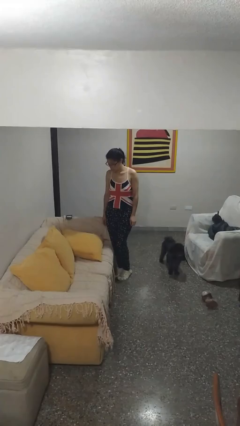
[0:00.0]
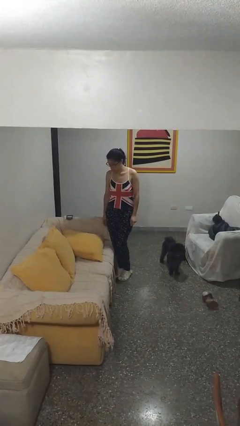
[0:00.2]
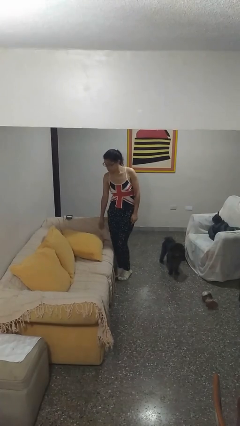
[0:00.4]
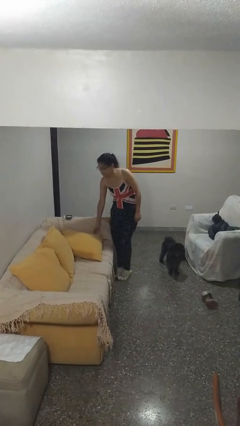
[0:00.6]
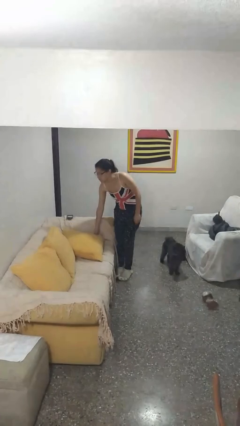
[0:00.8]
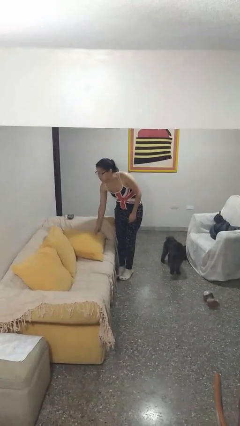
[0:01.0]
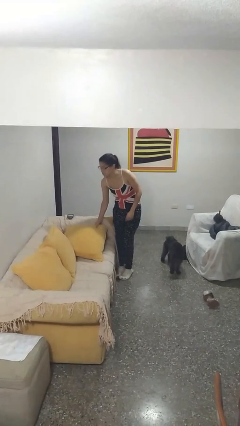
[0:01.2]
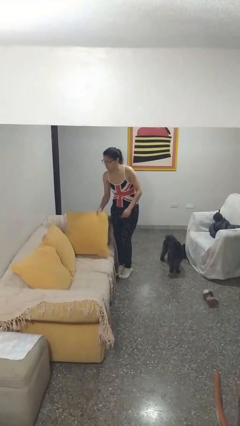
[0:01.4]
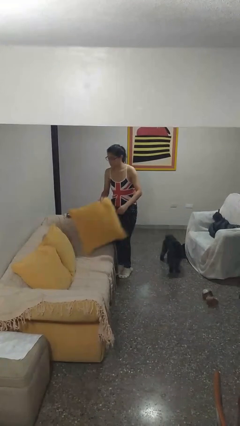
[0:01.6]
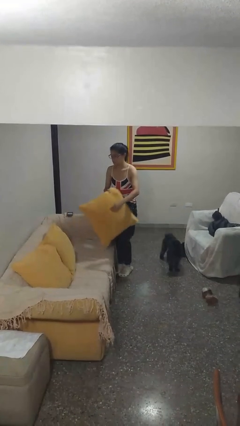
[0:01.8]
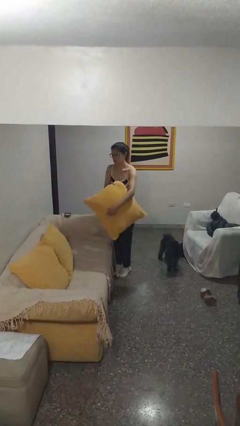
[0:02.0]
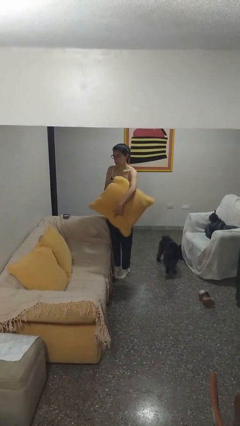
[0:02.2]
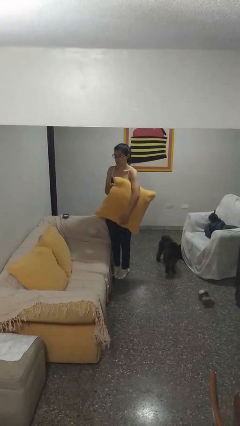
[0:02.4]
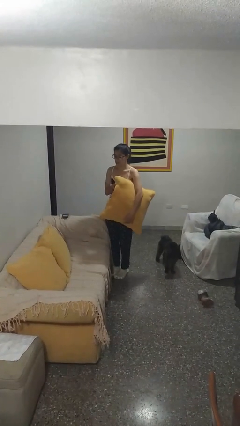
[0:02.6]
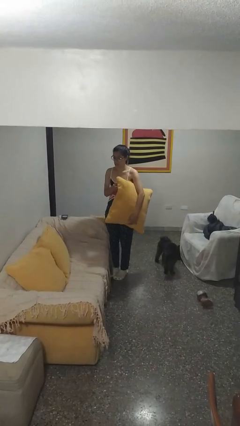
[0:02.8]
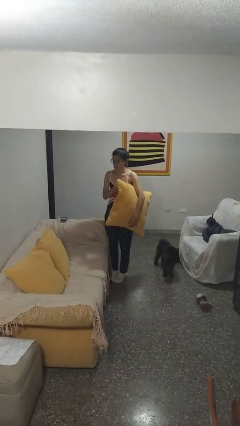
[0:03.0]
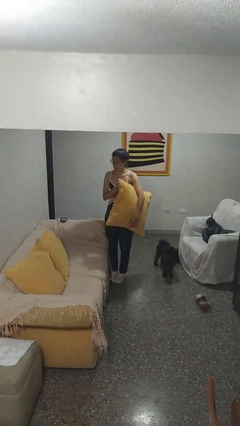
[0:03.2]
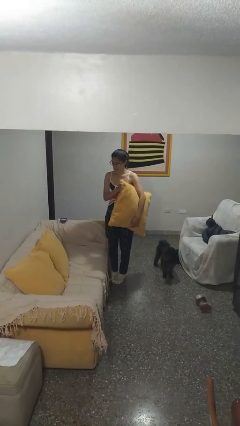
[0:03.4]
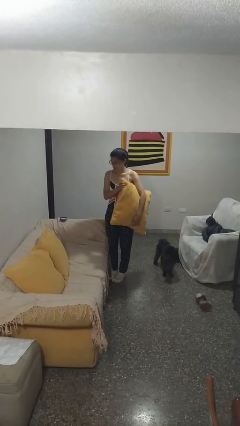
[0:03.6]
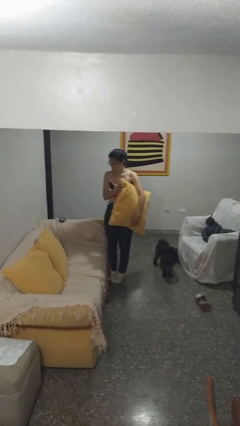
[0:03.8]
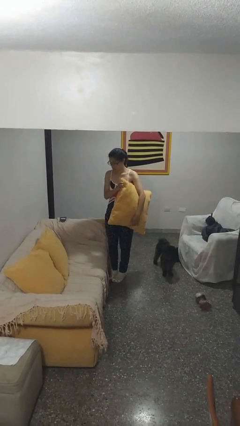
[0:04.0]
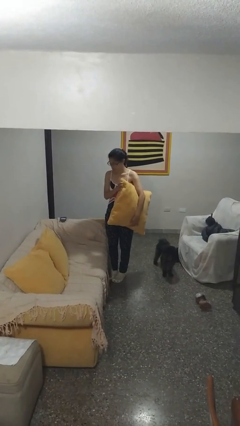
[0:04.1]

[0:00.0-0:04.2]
person picks up object from couch

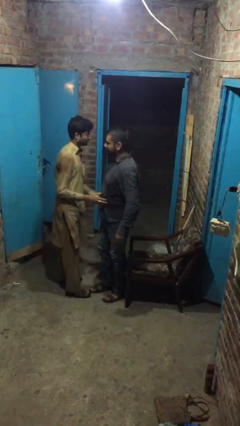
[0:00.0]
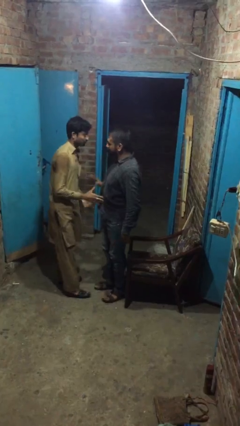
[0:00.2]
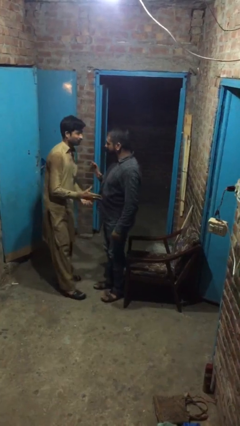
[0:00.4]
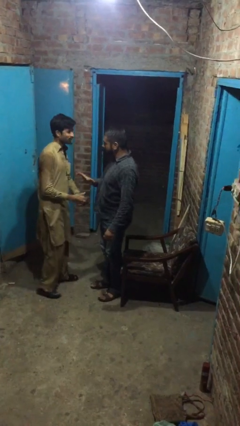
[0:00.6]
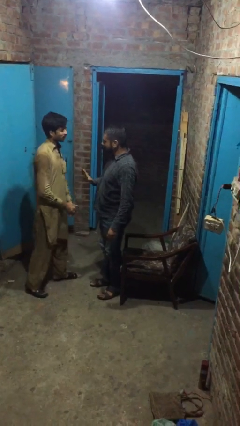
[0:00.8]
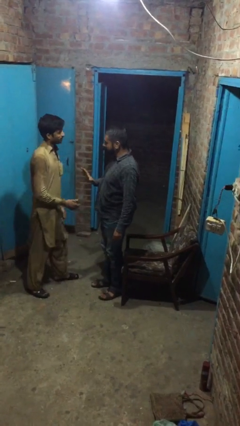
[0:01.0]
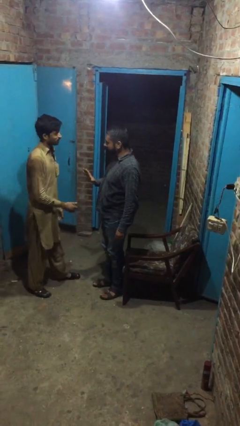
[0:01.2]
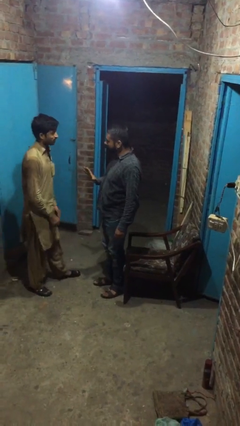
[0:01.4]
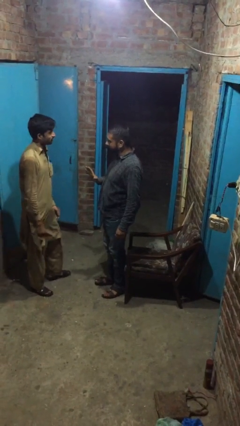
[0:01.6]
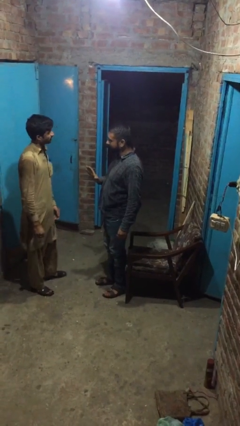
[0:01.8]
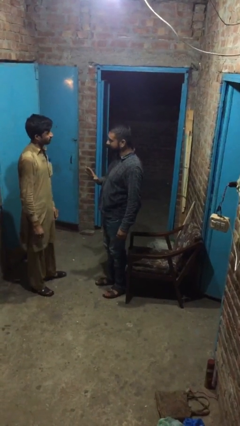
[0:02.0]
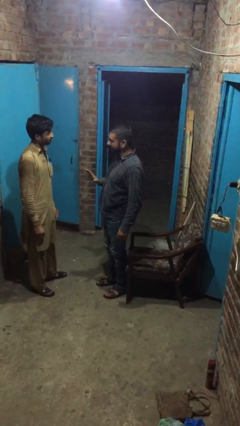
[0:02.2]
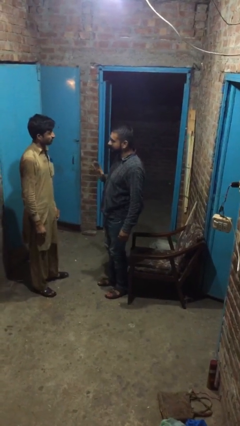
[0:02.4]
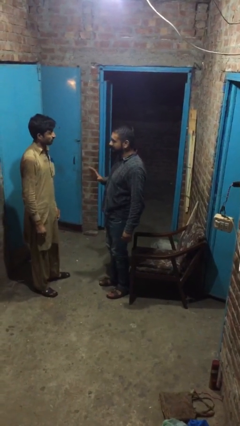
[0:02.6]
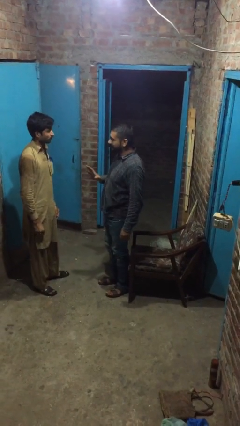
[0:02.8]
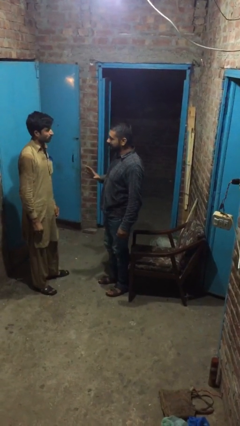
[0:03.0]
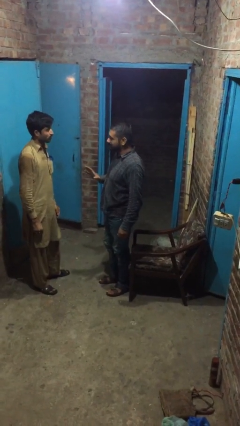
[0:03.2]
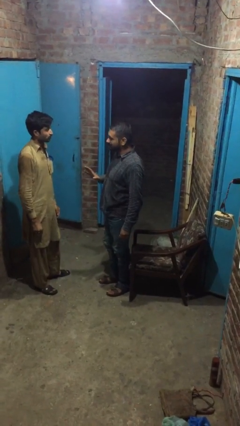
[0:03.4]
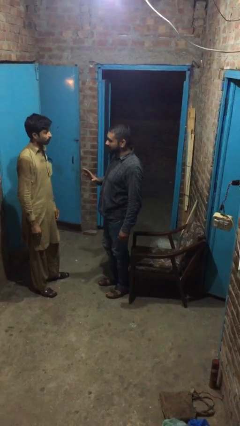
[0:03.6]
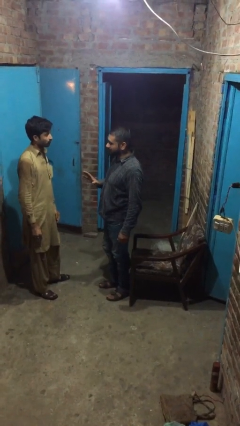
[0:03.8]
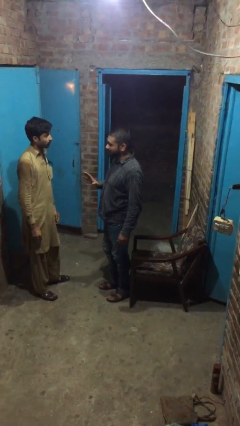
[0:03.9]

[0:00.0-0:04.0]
person talks to person

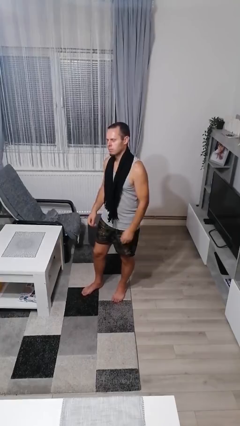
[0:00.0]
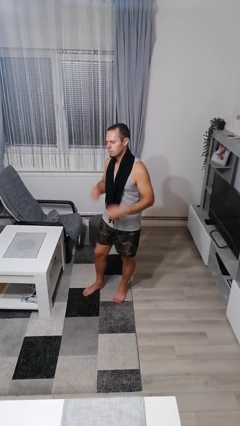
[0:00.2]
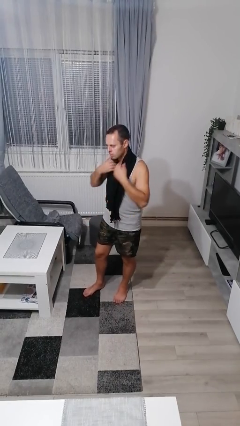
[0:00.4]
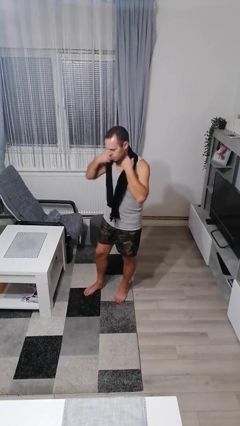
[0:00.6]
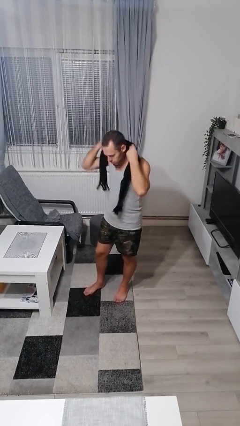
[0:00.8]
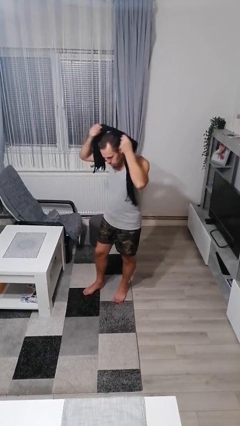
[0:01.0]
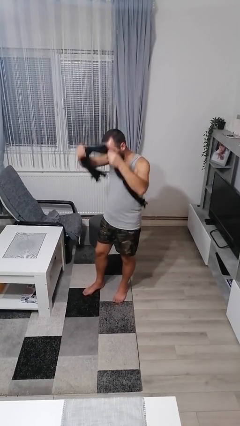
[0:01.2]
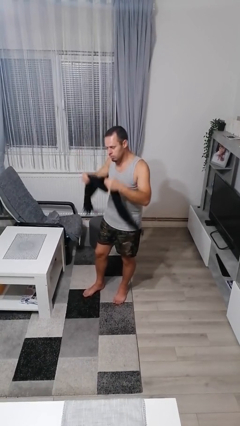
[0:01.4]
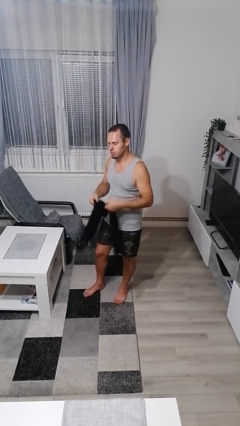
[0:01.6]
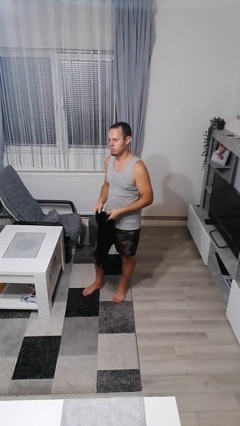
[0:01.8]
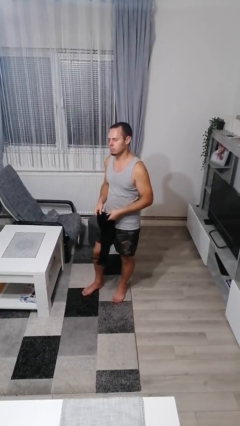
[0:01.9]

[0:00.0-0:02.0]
person takes off scarf

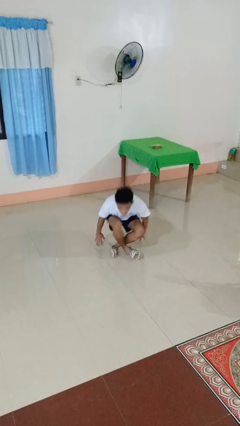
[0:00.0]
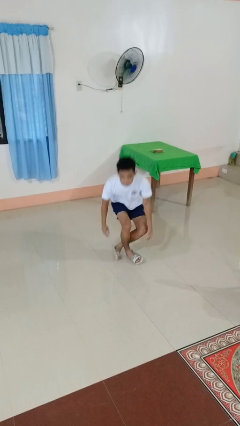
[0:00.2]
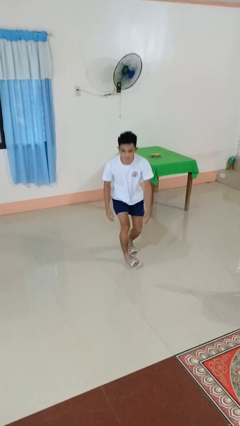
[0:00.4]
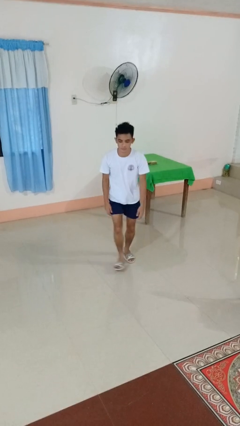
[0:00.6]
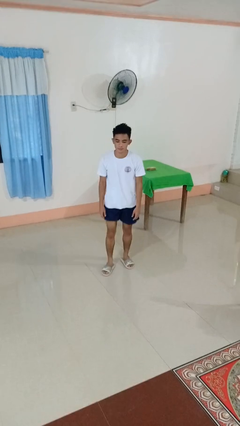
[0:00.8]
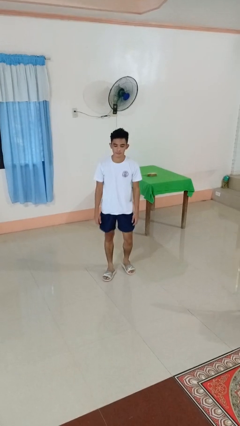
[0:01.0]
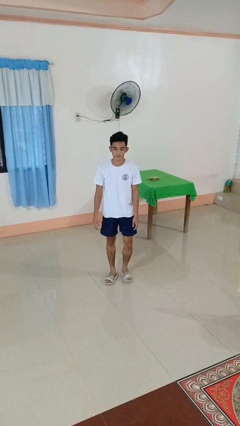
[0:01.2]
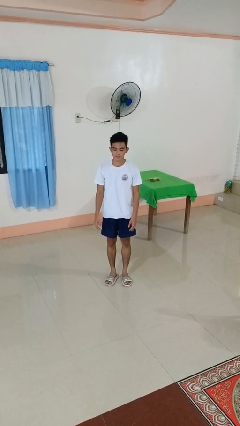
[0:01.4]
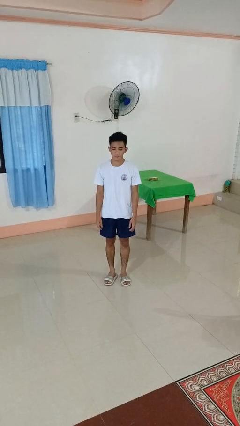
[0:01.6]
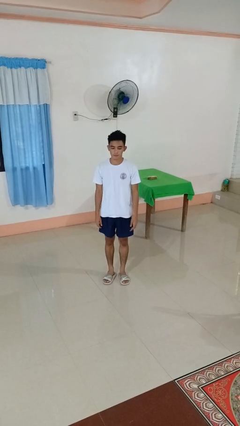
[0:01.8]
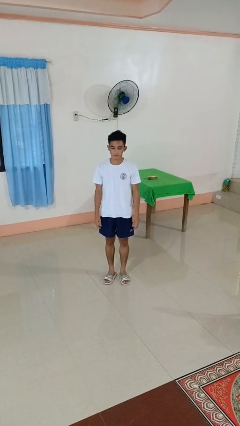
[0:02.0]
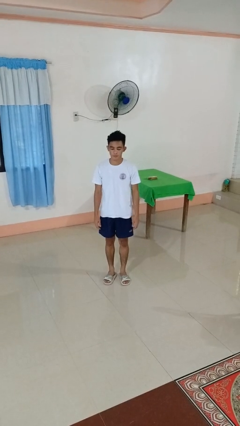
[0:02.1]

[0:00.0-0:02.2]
person stands up from floor

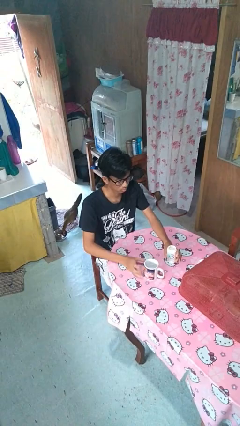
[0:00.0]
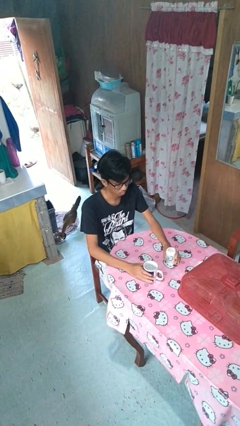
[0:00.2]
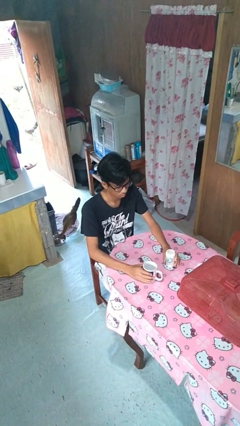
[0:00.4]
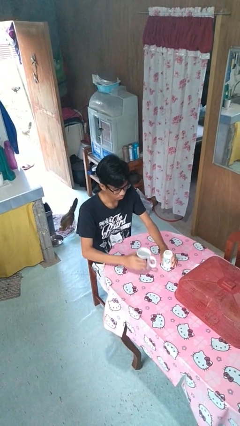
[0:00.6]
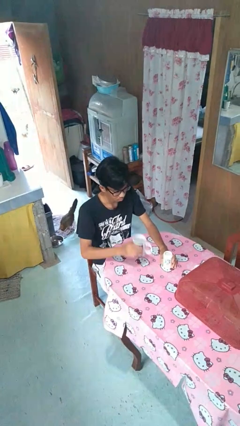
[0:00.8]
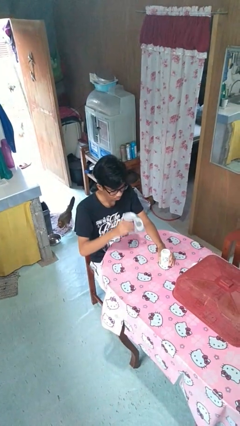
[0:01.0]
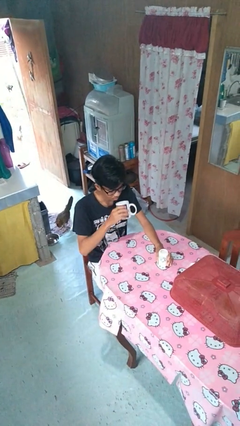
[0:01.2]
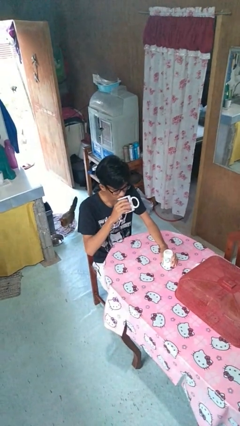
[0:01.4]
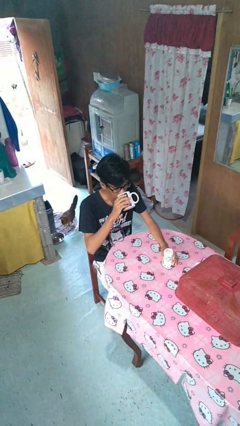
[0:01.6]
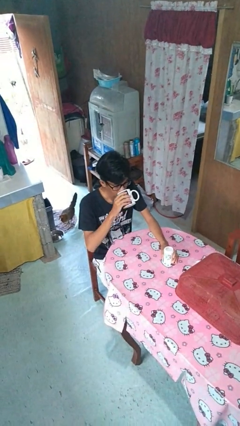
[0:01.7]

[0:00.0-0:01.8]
person drinks from cup

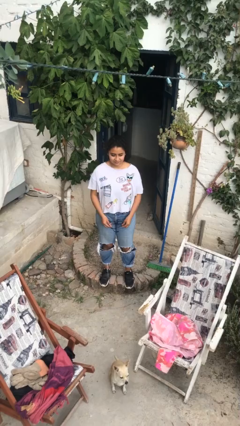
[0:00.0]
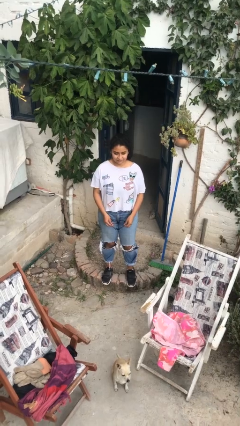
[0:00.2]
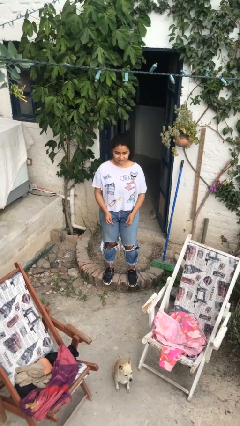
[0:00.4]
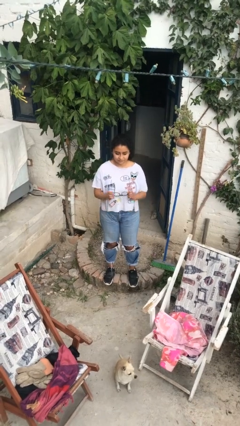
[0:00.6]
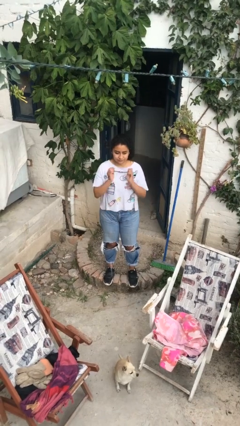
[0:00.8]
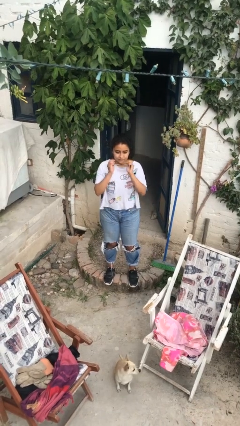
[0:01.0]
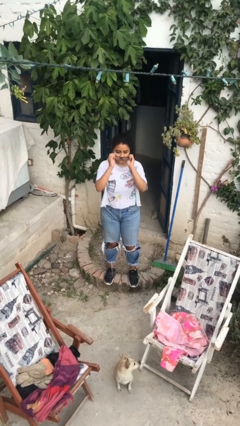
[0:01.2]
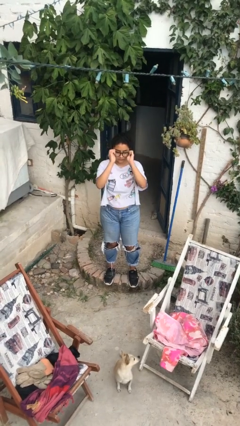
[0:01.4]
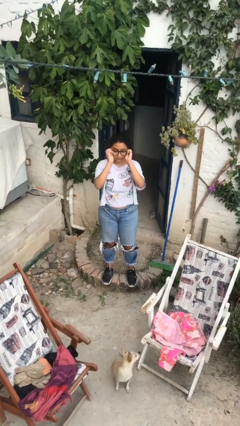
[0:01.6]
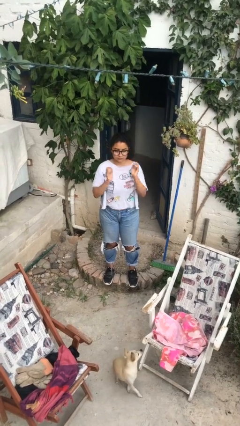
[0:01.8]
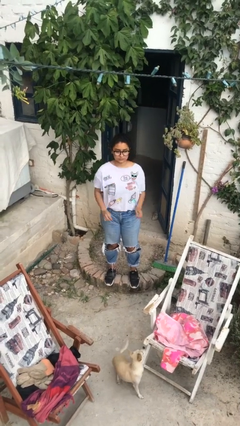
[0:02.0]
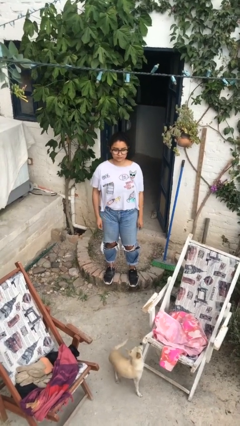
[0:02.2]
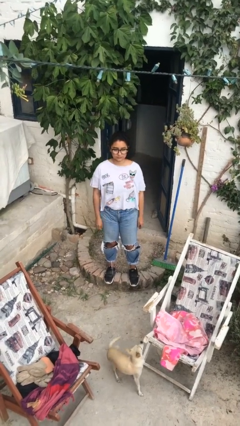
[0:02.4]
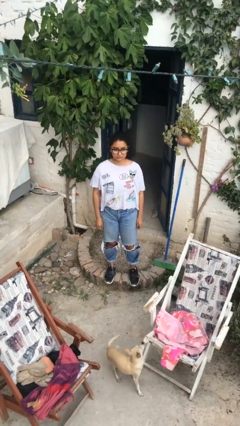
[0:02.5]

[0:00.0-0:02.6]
person puts on glasses

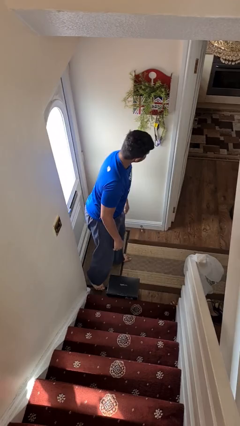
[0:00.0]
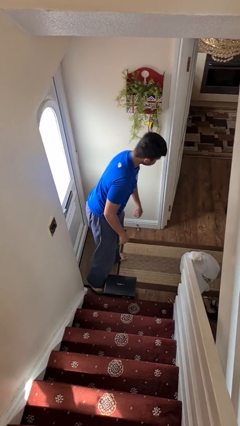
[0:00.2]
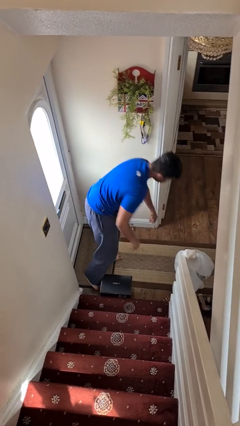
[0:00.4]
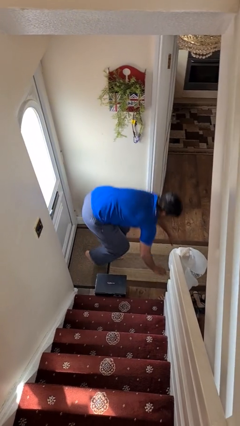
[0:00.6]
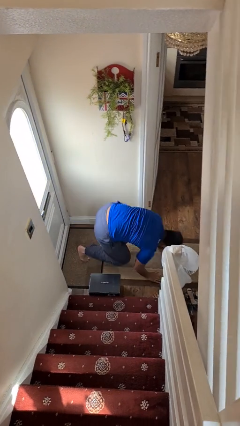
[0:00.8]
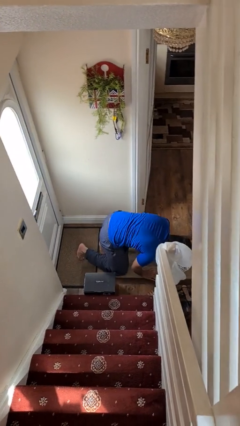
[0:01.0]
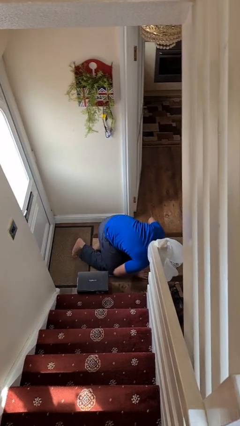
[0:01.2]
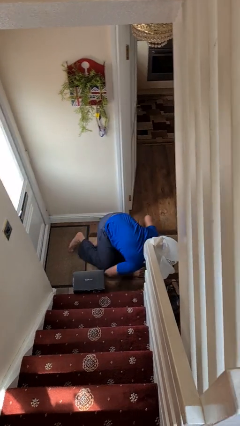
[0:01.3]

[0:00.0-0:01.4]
person trips on object on floor
